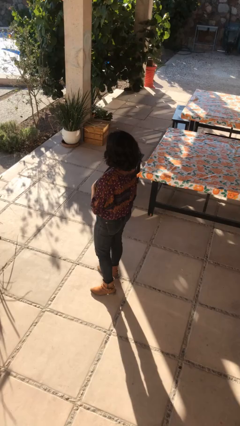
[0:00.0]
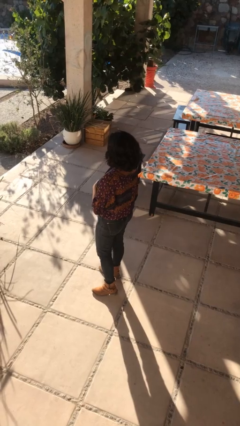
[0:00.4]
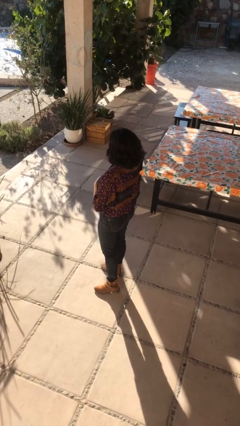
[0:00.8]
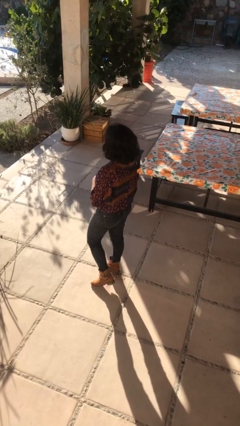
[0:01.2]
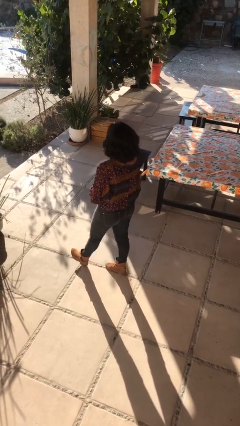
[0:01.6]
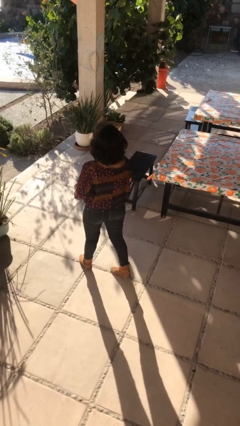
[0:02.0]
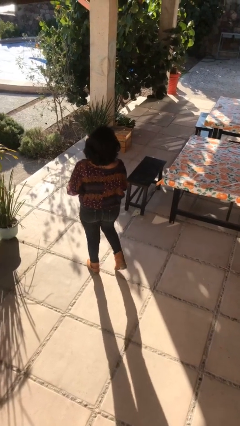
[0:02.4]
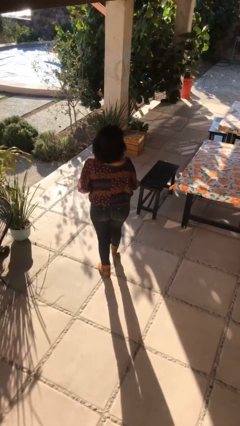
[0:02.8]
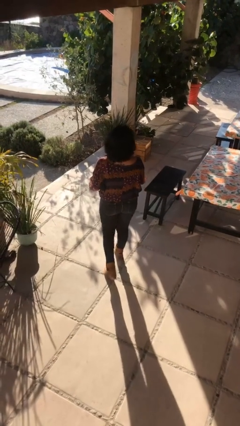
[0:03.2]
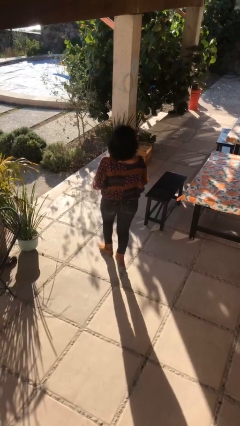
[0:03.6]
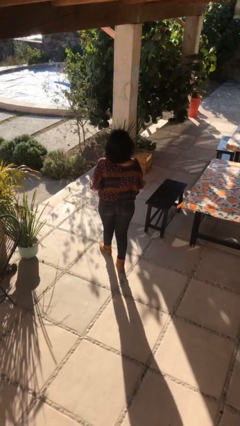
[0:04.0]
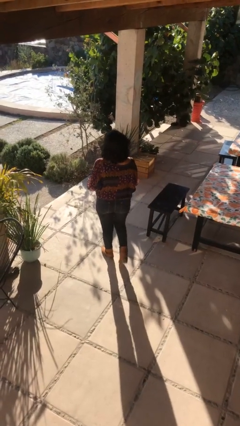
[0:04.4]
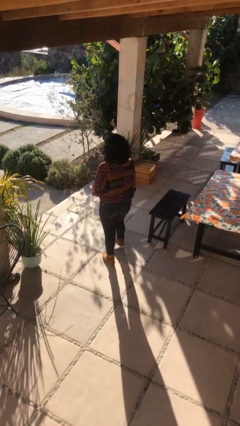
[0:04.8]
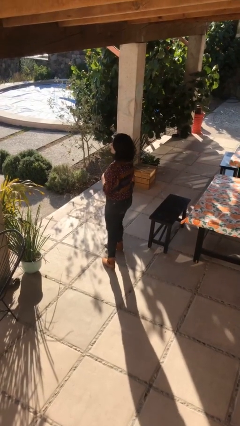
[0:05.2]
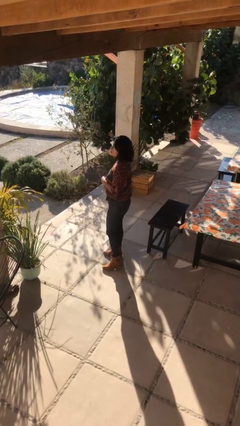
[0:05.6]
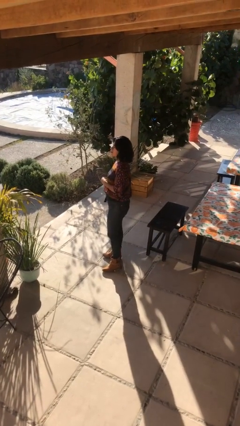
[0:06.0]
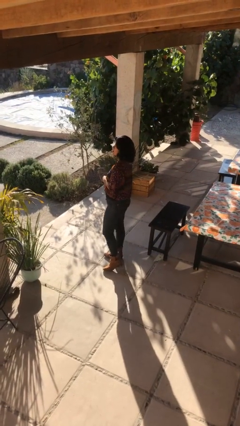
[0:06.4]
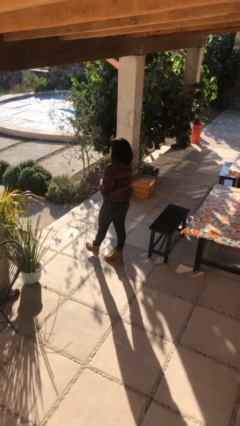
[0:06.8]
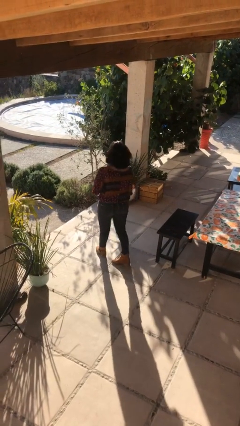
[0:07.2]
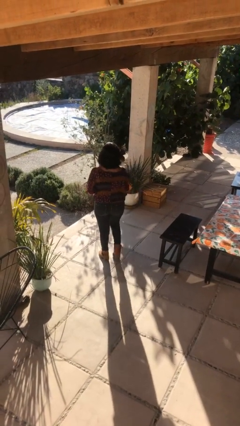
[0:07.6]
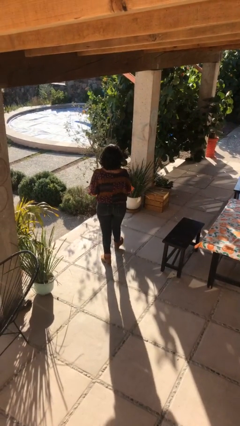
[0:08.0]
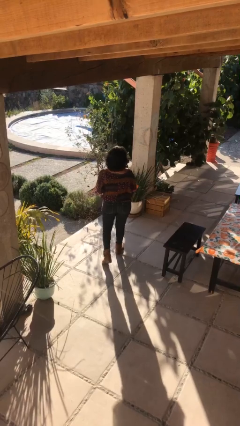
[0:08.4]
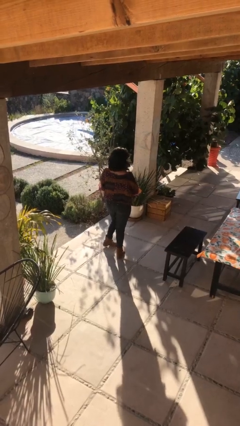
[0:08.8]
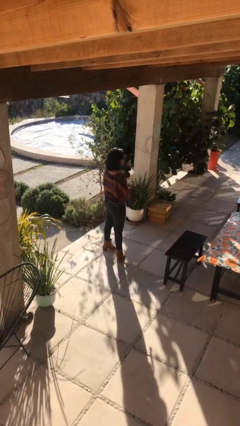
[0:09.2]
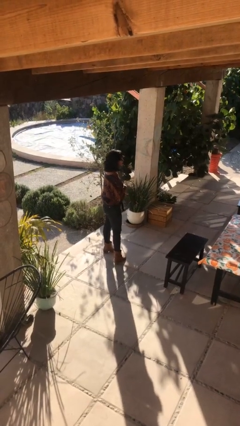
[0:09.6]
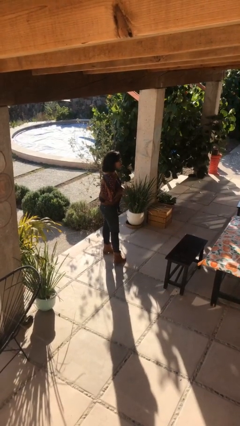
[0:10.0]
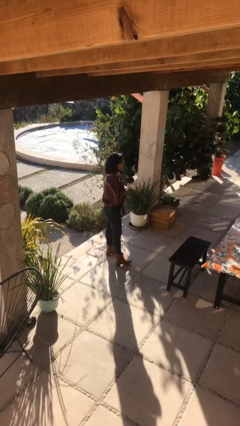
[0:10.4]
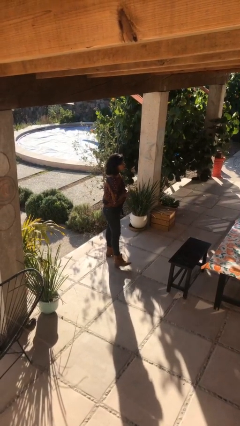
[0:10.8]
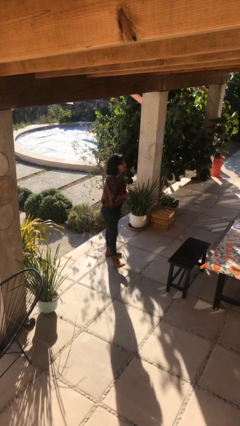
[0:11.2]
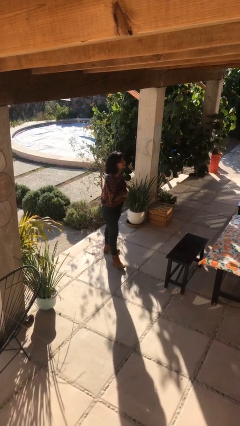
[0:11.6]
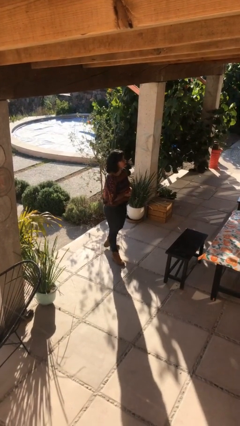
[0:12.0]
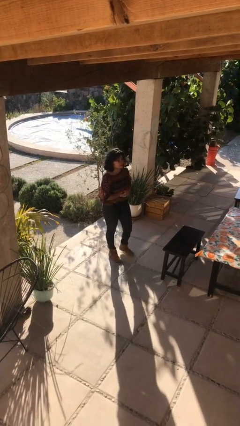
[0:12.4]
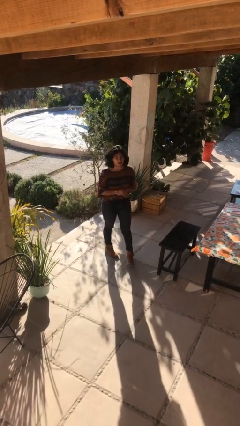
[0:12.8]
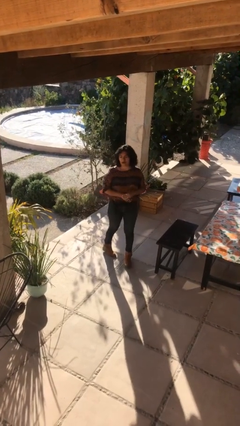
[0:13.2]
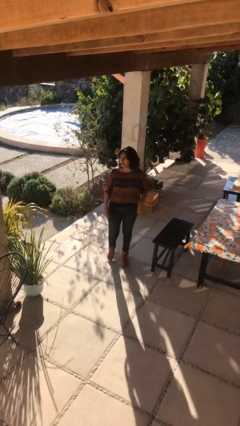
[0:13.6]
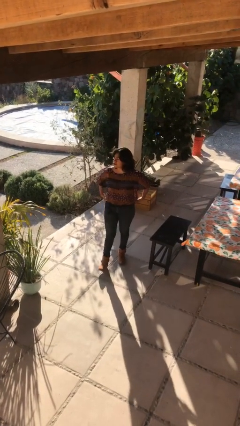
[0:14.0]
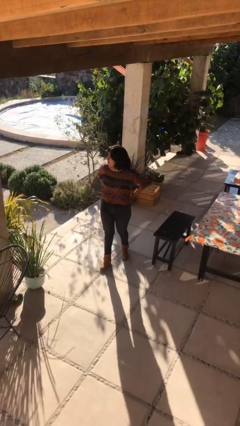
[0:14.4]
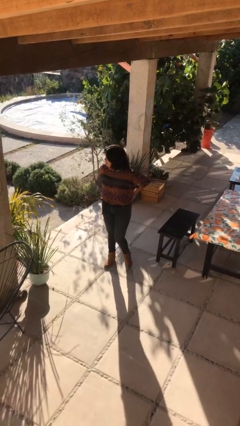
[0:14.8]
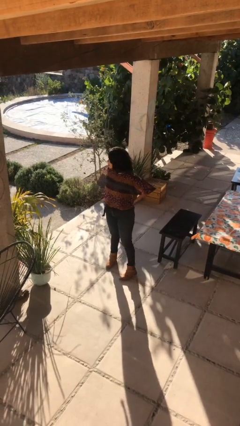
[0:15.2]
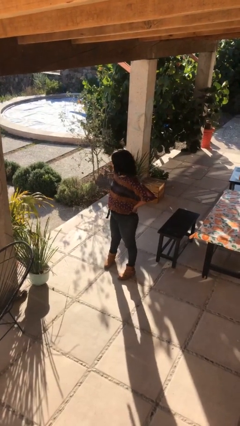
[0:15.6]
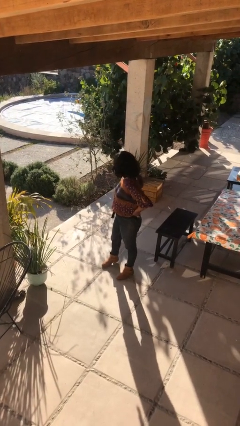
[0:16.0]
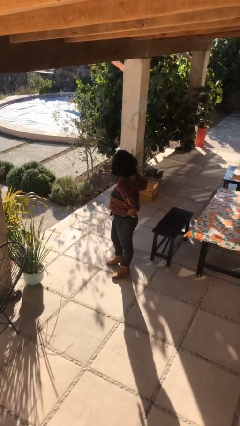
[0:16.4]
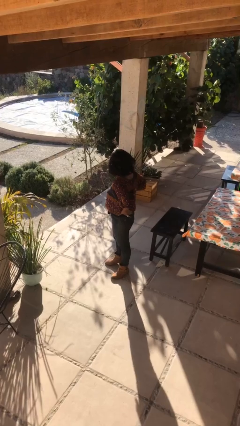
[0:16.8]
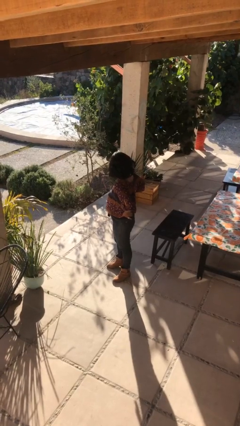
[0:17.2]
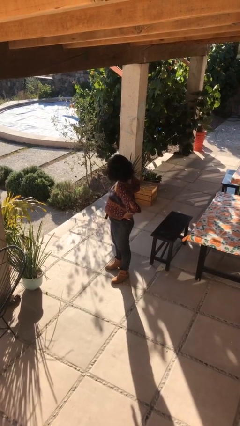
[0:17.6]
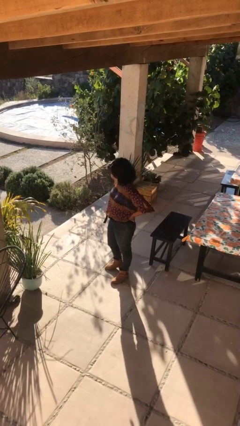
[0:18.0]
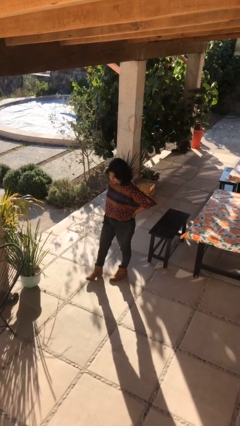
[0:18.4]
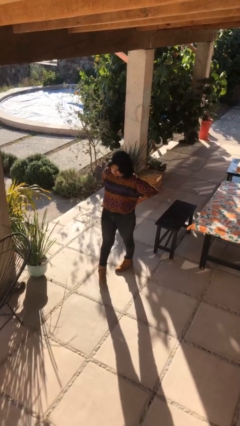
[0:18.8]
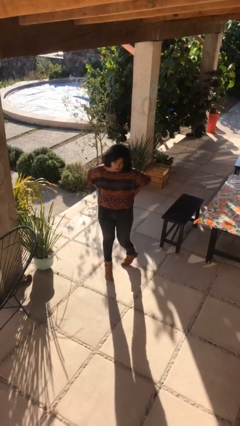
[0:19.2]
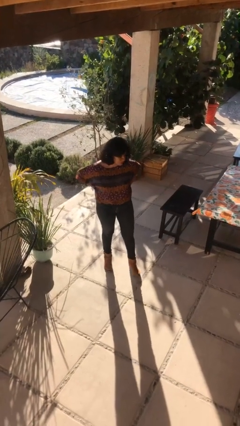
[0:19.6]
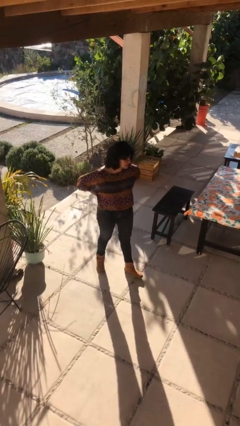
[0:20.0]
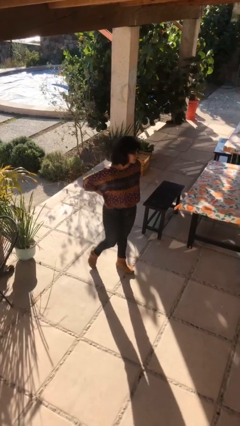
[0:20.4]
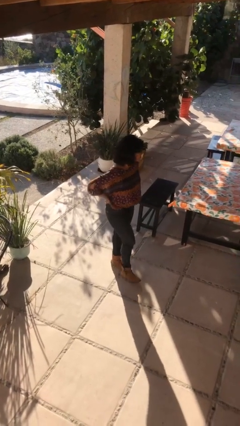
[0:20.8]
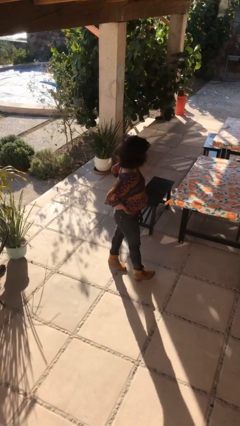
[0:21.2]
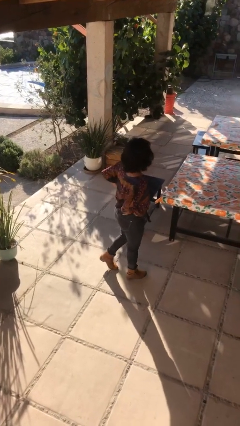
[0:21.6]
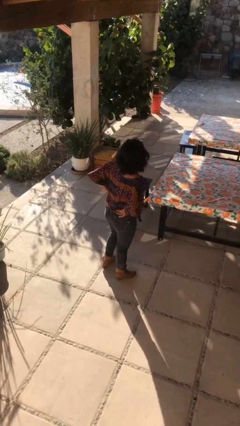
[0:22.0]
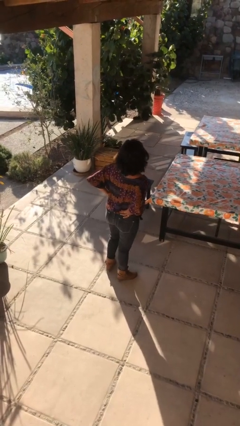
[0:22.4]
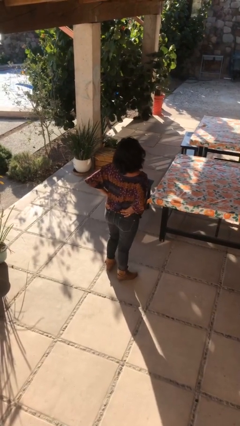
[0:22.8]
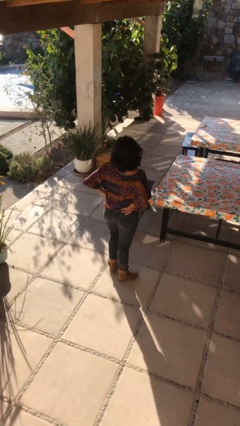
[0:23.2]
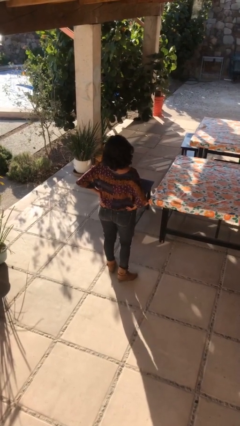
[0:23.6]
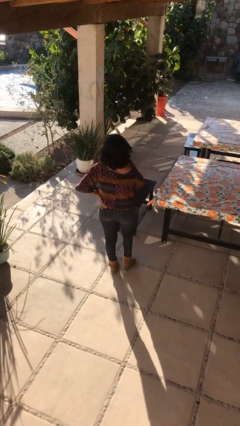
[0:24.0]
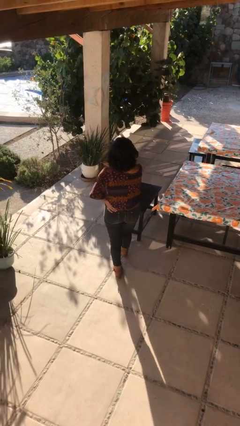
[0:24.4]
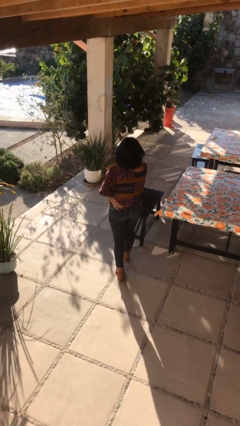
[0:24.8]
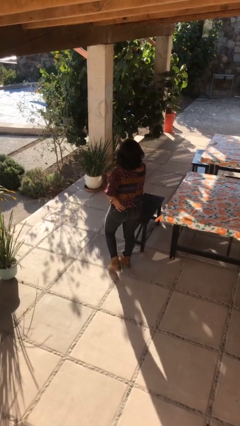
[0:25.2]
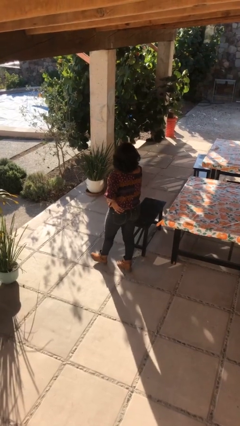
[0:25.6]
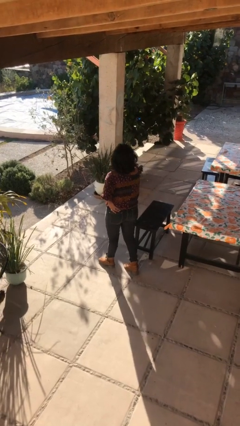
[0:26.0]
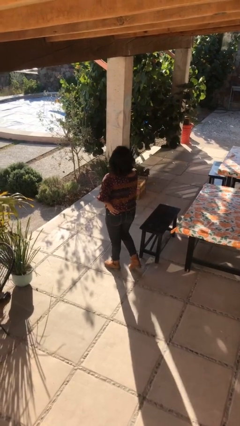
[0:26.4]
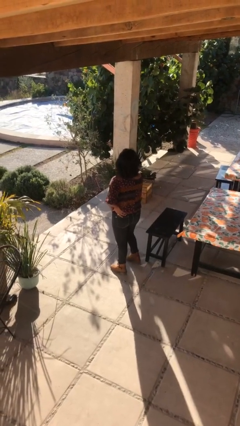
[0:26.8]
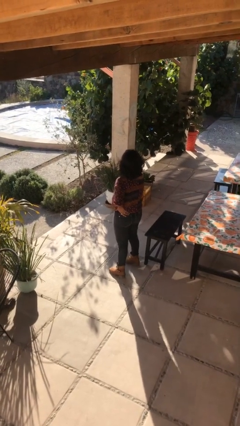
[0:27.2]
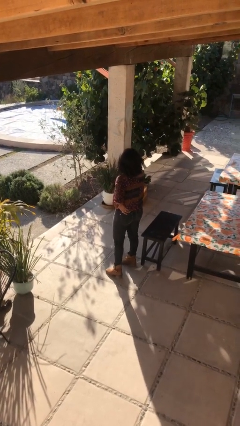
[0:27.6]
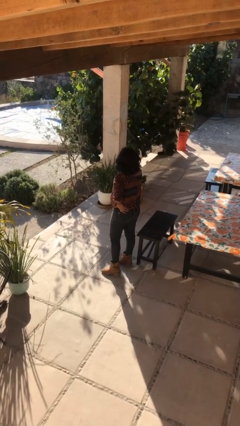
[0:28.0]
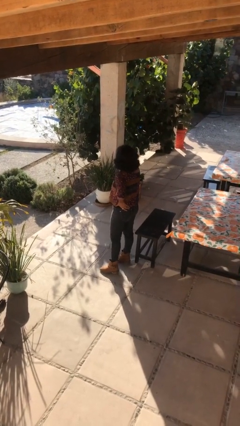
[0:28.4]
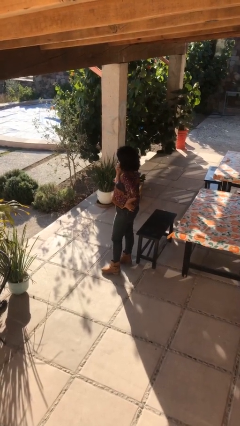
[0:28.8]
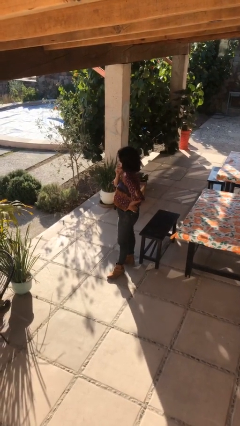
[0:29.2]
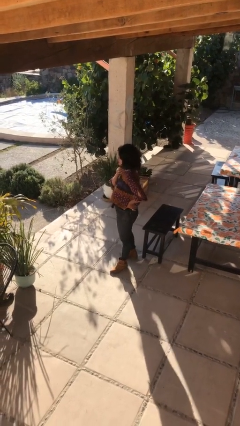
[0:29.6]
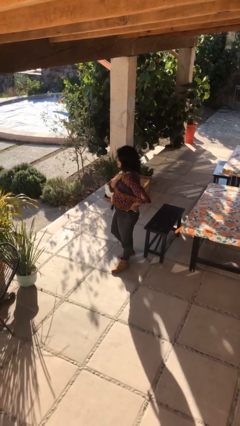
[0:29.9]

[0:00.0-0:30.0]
person walks

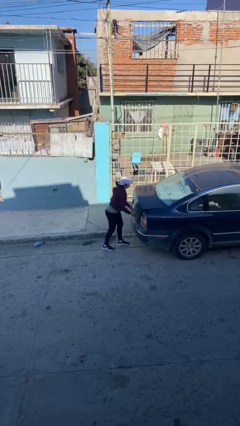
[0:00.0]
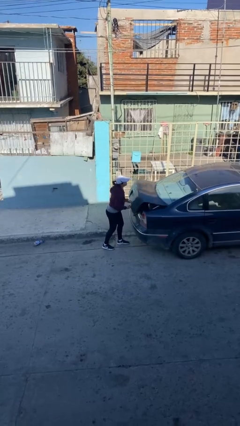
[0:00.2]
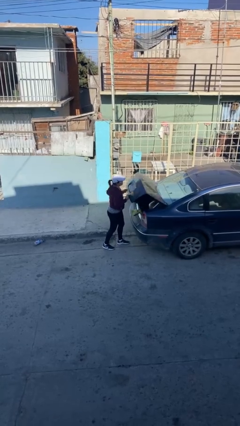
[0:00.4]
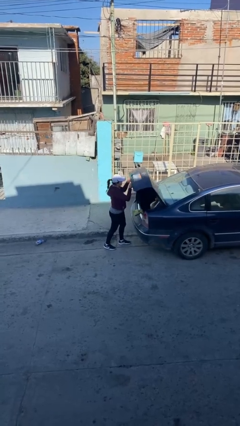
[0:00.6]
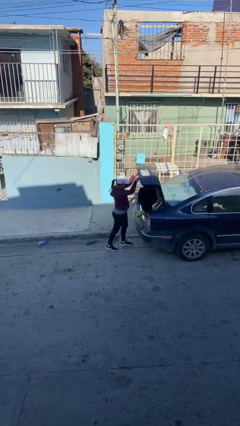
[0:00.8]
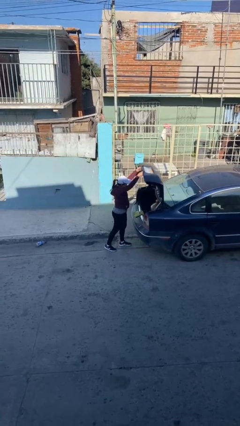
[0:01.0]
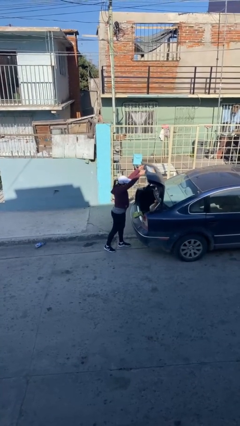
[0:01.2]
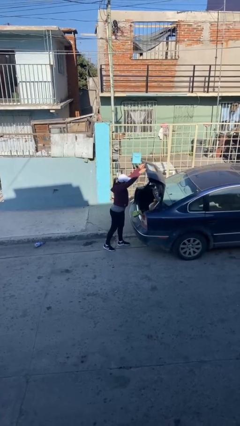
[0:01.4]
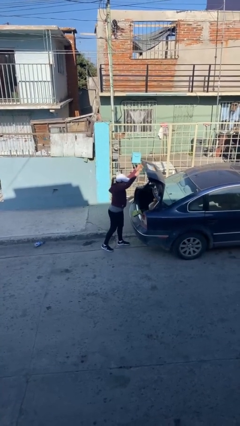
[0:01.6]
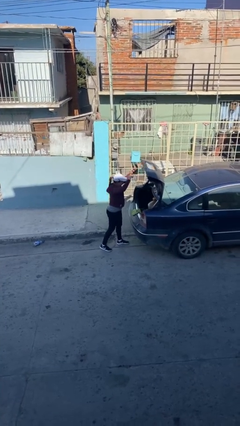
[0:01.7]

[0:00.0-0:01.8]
person opens car trunk

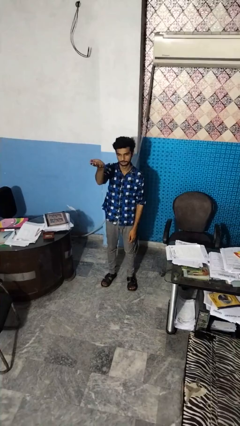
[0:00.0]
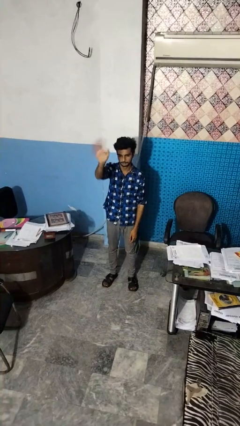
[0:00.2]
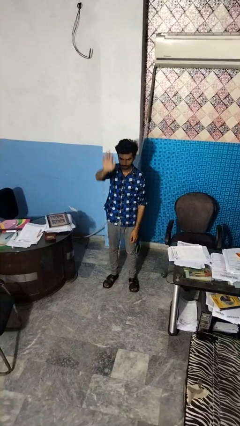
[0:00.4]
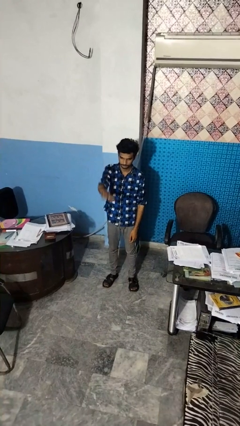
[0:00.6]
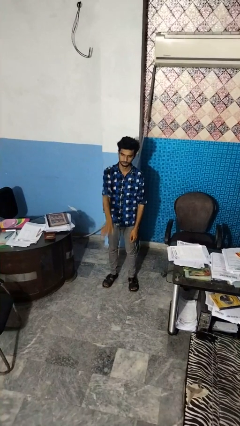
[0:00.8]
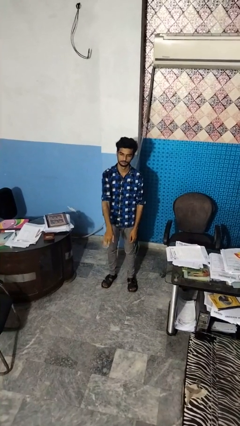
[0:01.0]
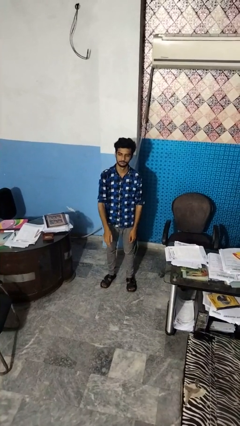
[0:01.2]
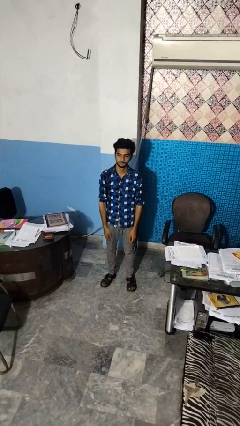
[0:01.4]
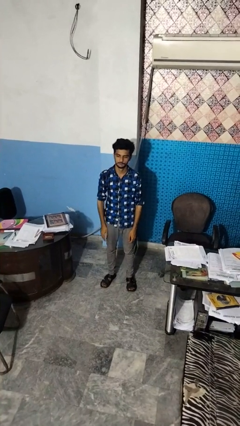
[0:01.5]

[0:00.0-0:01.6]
person gestures swipe down
